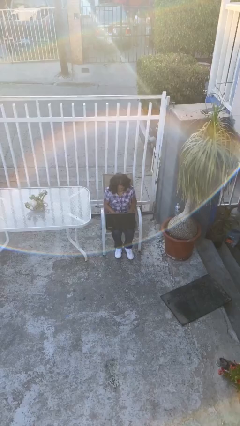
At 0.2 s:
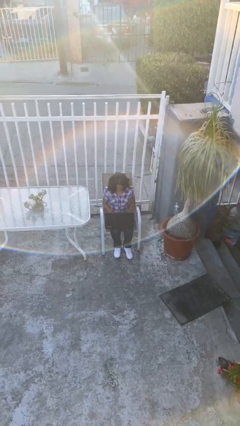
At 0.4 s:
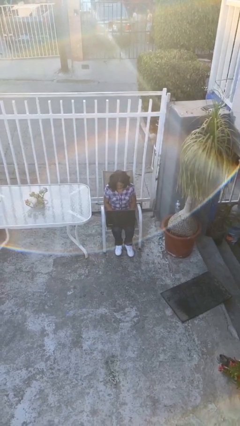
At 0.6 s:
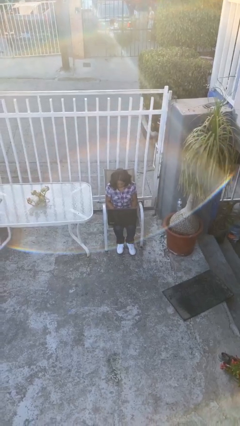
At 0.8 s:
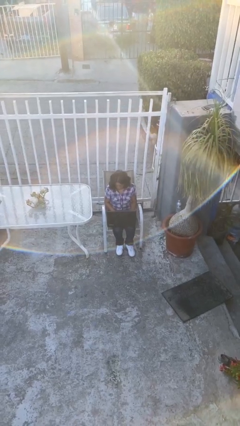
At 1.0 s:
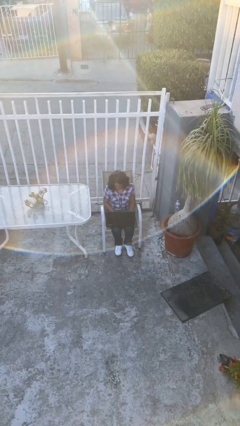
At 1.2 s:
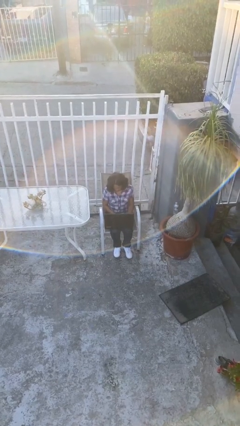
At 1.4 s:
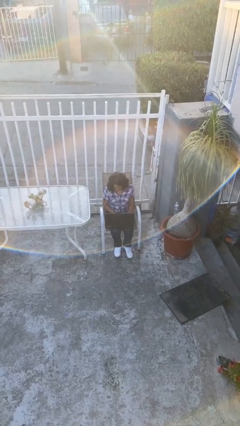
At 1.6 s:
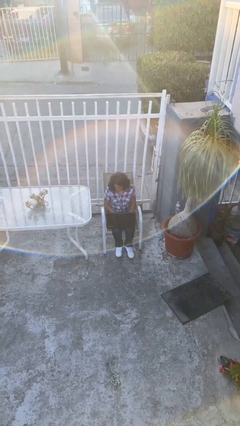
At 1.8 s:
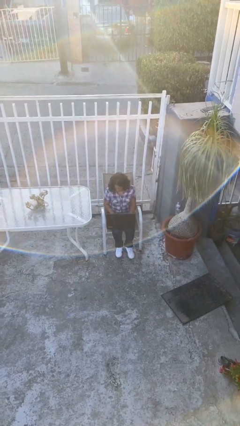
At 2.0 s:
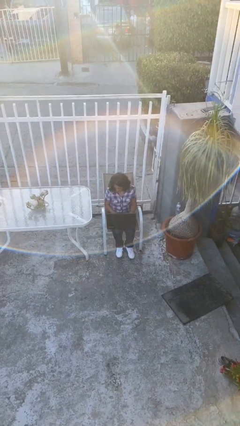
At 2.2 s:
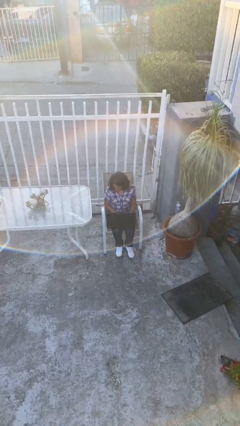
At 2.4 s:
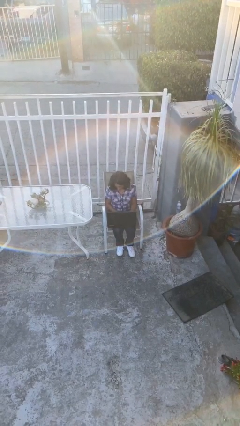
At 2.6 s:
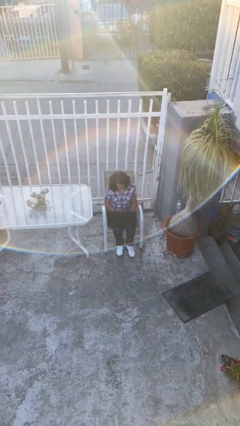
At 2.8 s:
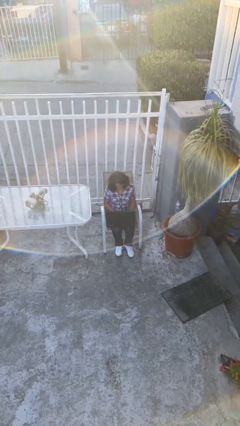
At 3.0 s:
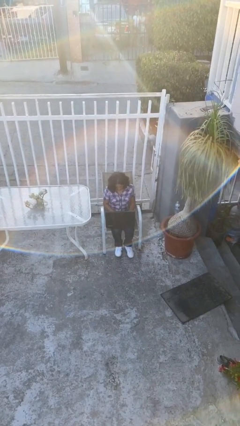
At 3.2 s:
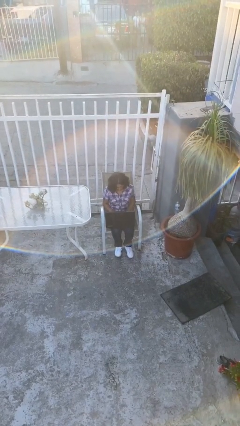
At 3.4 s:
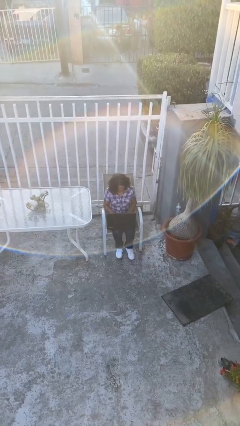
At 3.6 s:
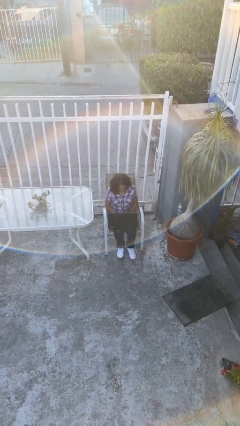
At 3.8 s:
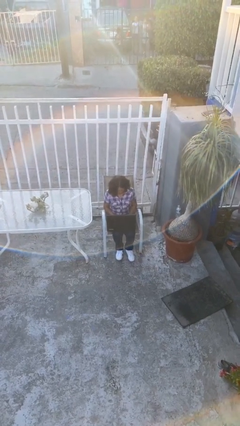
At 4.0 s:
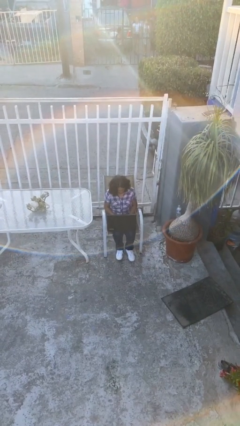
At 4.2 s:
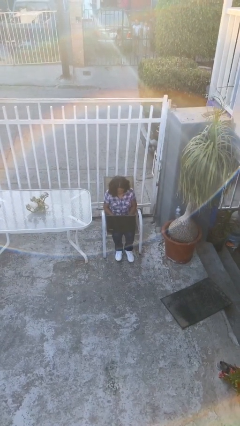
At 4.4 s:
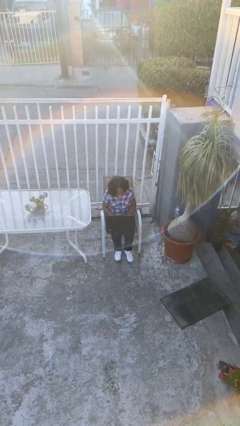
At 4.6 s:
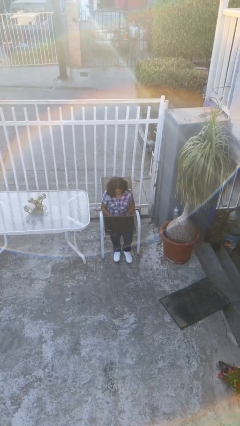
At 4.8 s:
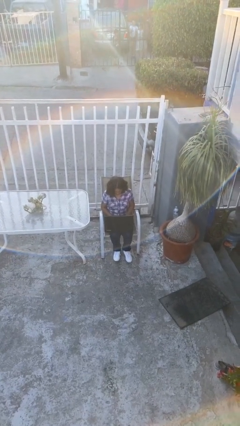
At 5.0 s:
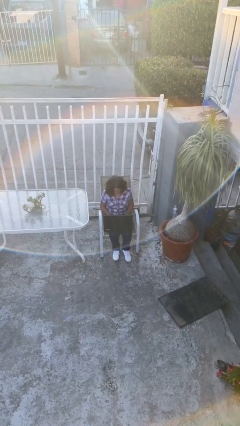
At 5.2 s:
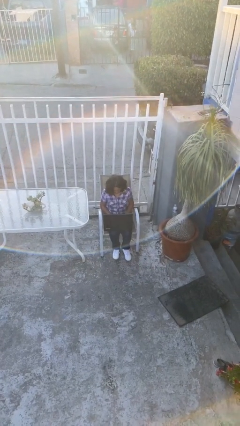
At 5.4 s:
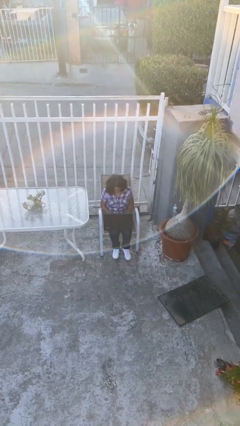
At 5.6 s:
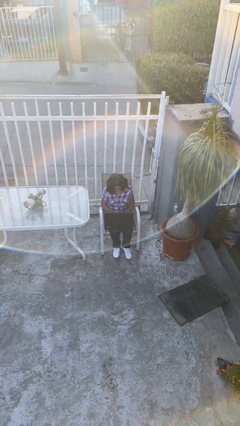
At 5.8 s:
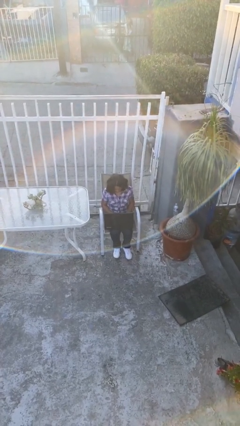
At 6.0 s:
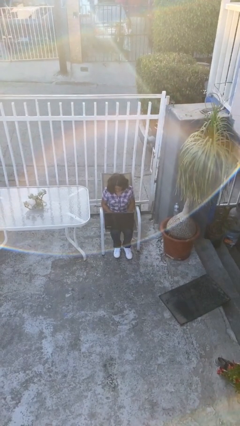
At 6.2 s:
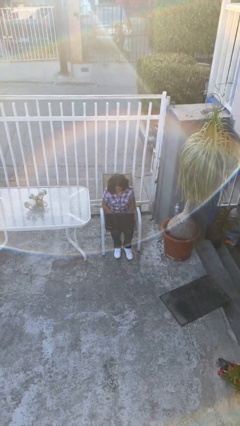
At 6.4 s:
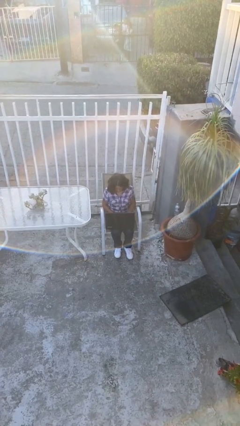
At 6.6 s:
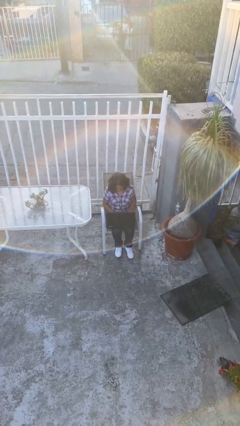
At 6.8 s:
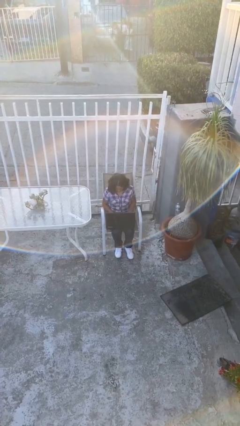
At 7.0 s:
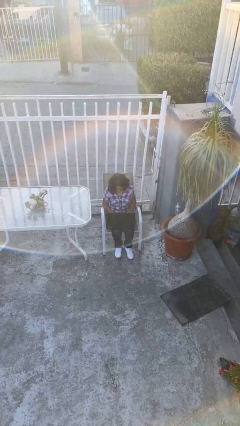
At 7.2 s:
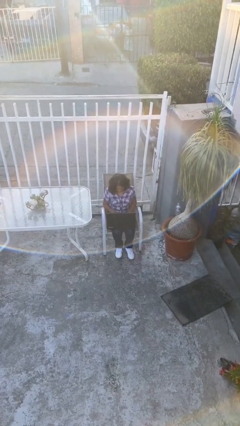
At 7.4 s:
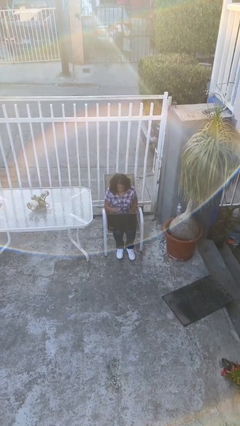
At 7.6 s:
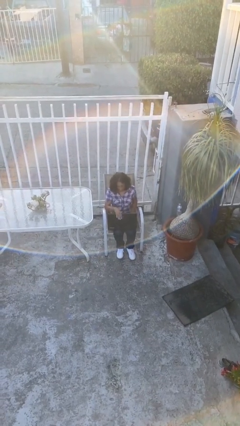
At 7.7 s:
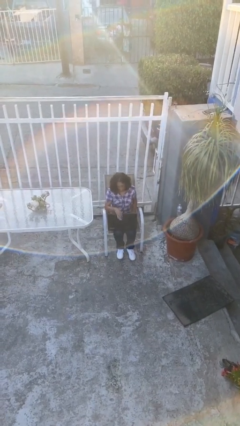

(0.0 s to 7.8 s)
person interacts with laptop

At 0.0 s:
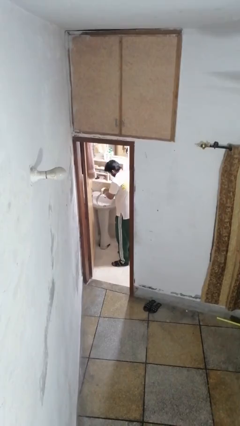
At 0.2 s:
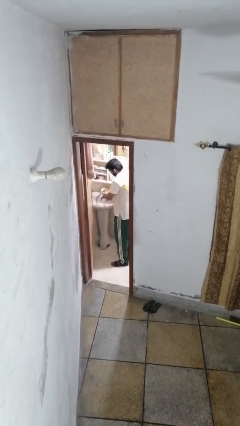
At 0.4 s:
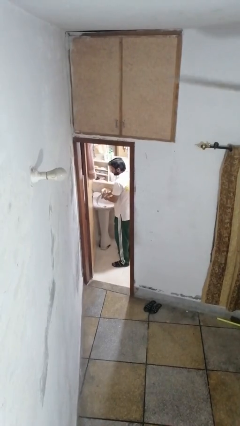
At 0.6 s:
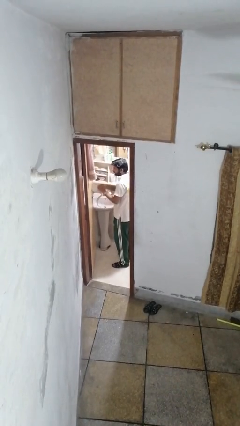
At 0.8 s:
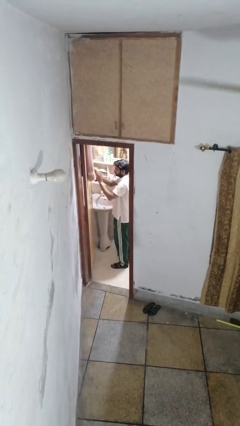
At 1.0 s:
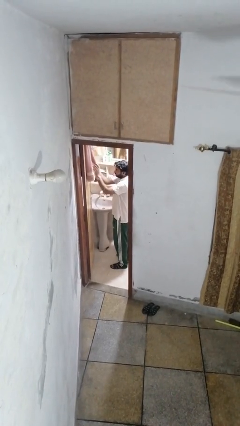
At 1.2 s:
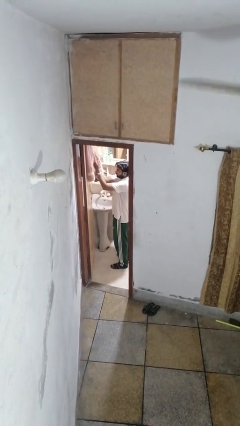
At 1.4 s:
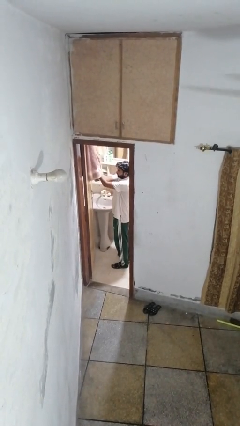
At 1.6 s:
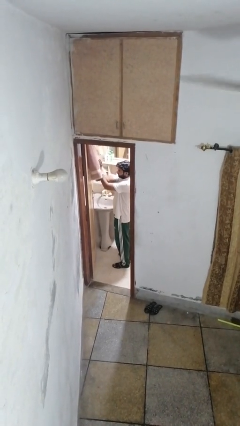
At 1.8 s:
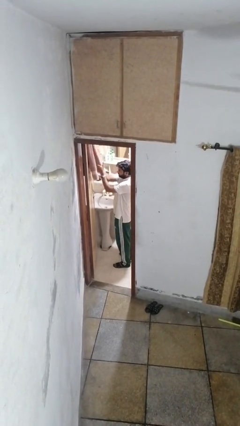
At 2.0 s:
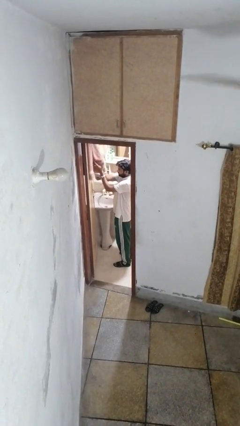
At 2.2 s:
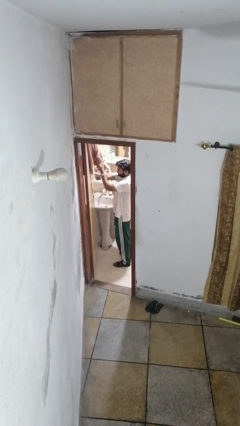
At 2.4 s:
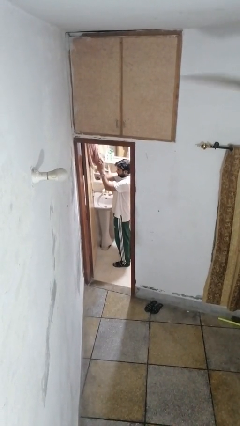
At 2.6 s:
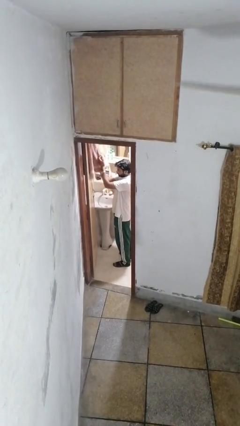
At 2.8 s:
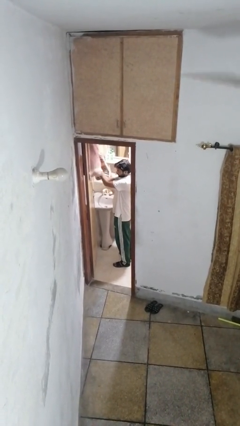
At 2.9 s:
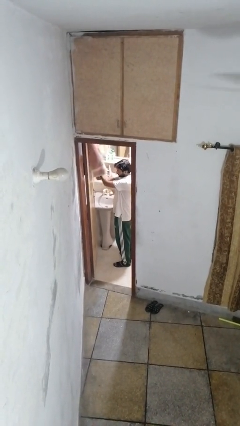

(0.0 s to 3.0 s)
person dries hands with towel

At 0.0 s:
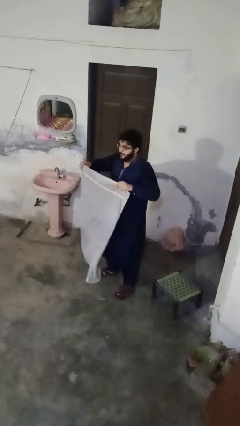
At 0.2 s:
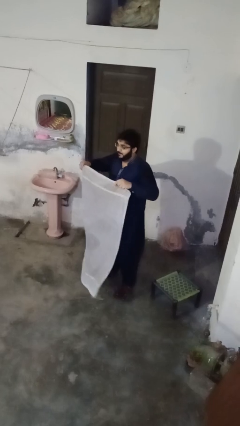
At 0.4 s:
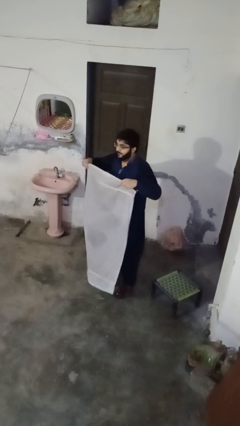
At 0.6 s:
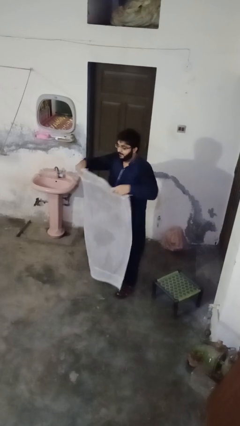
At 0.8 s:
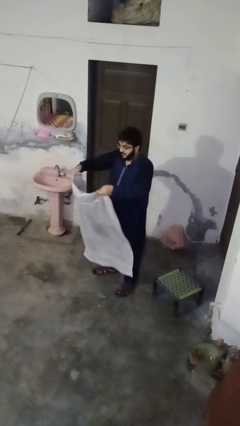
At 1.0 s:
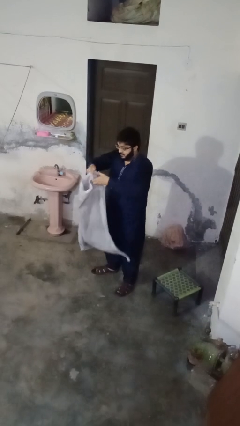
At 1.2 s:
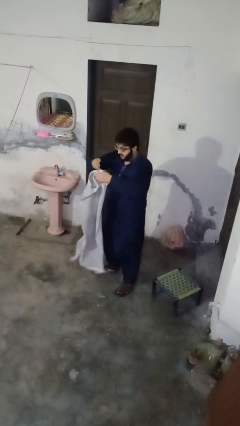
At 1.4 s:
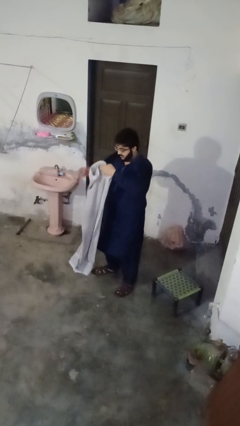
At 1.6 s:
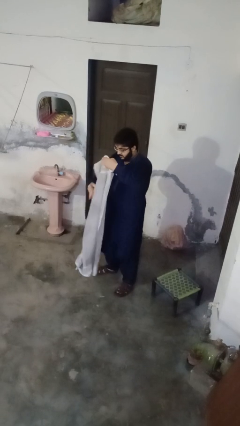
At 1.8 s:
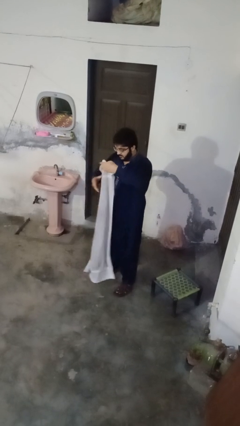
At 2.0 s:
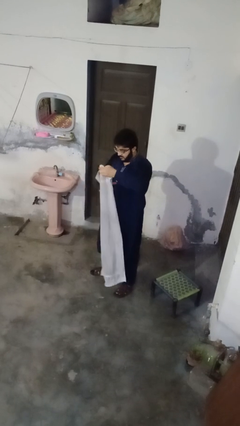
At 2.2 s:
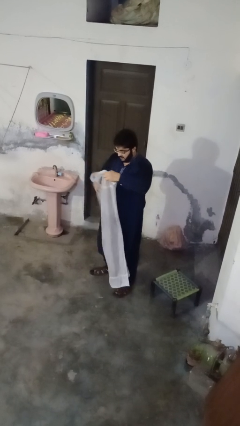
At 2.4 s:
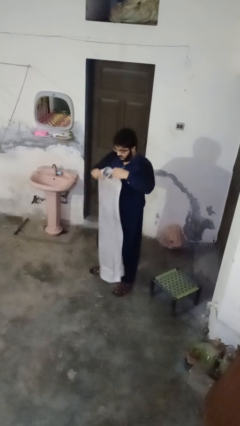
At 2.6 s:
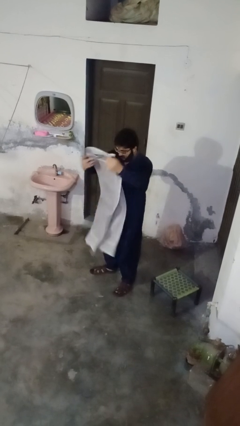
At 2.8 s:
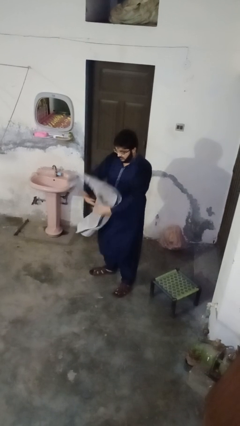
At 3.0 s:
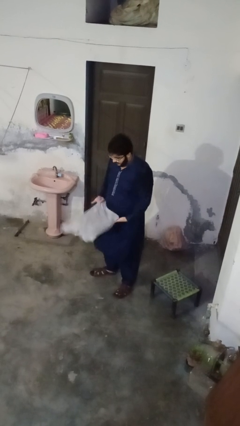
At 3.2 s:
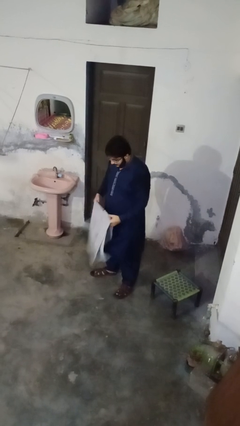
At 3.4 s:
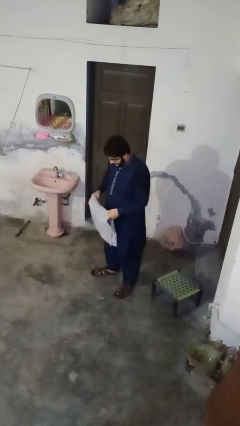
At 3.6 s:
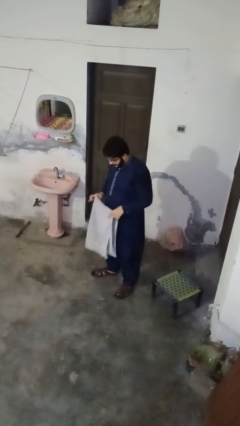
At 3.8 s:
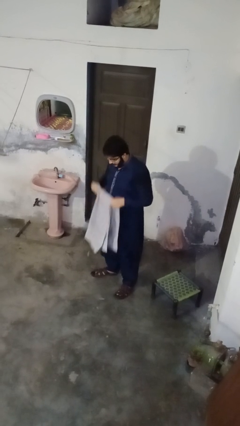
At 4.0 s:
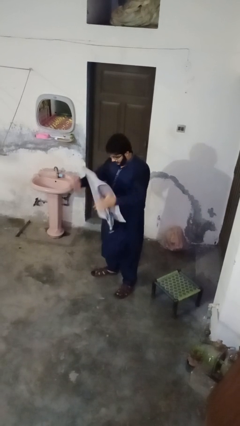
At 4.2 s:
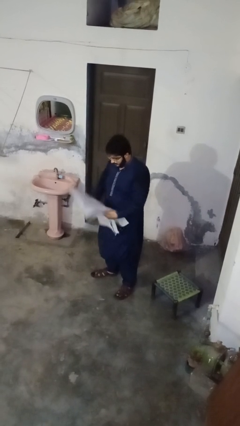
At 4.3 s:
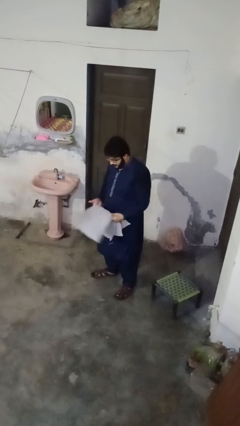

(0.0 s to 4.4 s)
person folds towel

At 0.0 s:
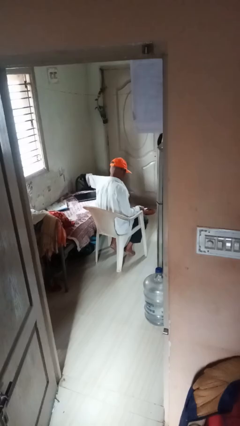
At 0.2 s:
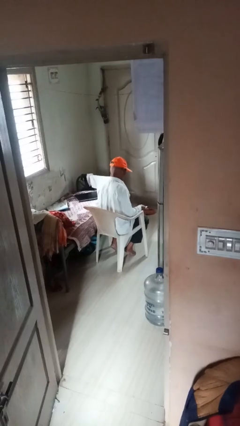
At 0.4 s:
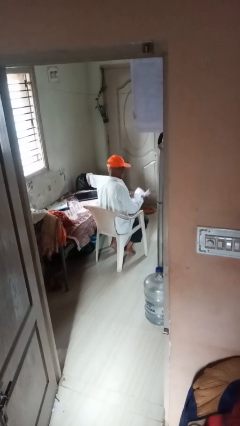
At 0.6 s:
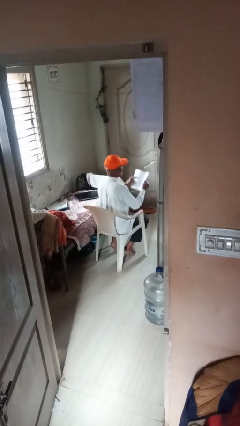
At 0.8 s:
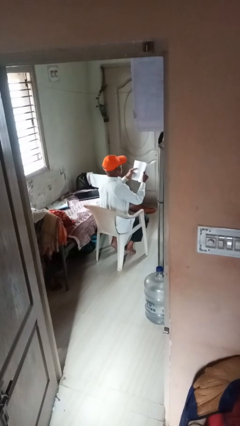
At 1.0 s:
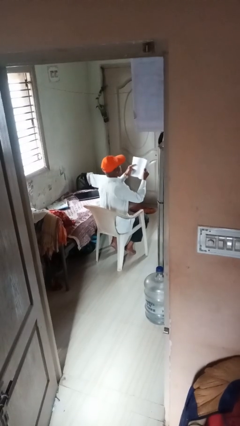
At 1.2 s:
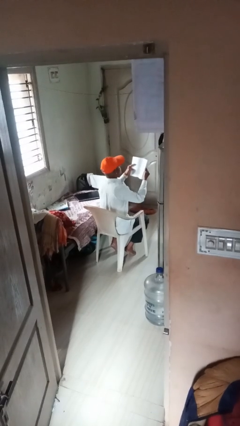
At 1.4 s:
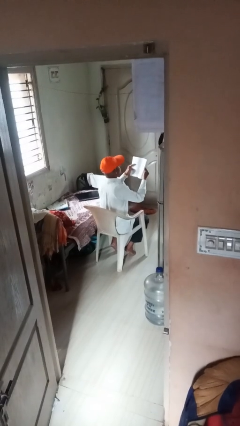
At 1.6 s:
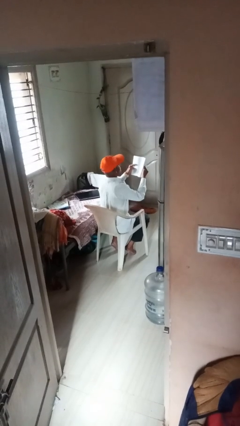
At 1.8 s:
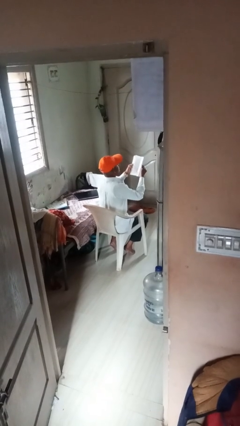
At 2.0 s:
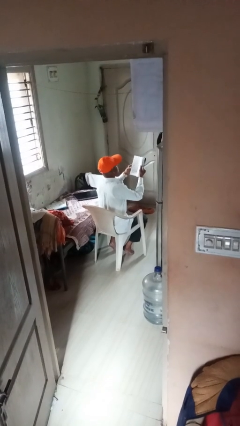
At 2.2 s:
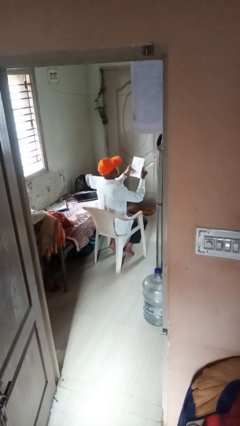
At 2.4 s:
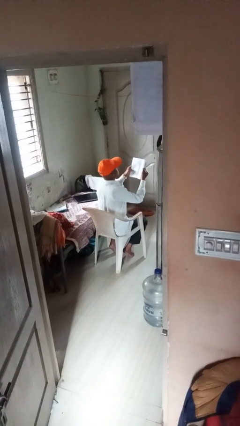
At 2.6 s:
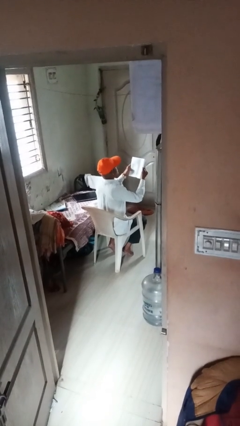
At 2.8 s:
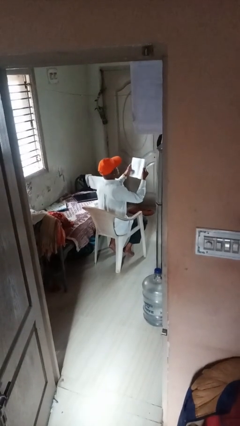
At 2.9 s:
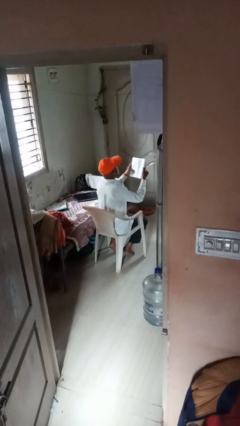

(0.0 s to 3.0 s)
person reads book
